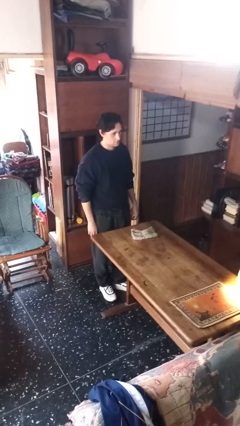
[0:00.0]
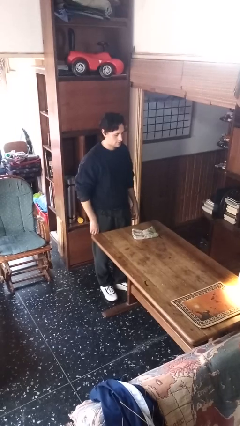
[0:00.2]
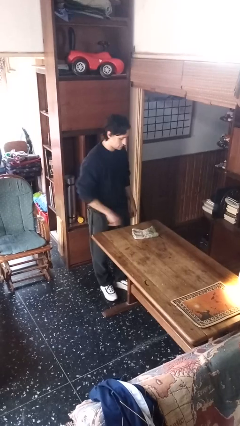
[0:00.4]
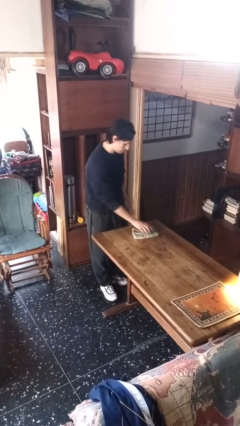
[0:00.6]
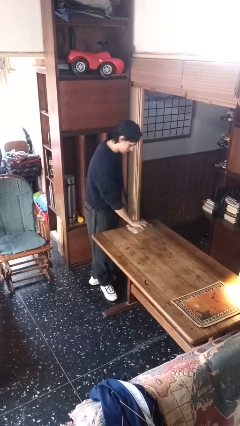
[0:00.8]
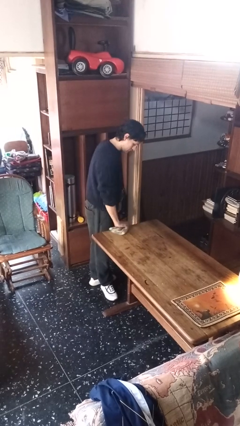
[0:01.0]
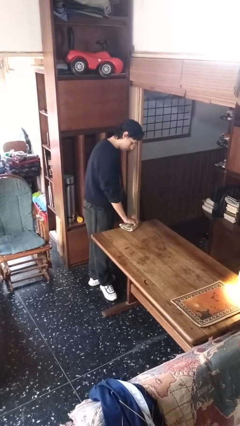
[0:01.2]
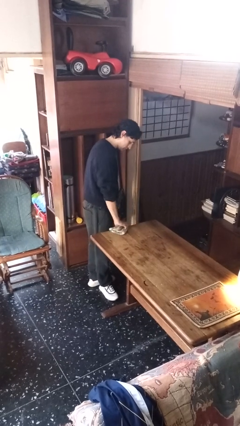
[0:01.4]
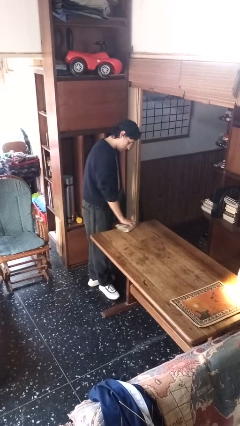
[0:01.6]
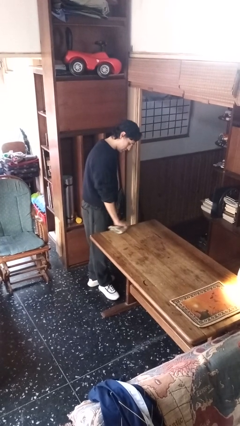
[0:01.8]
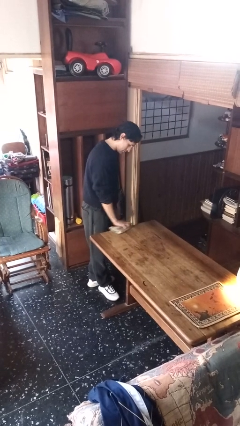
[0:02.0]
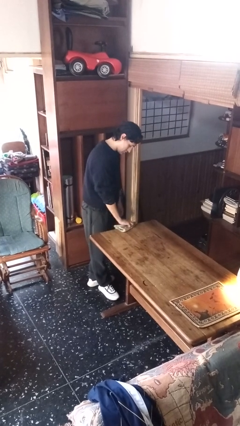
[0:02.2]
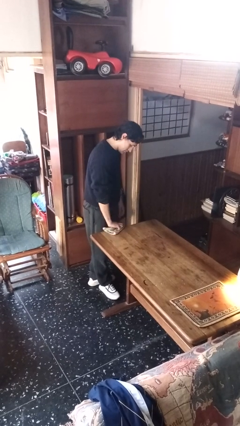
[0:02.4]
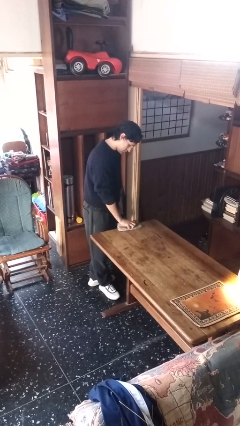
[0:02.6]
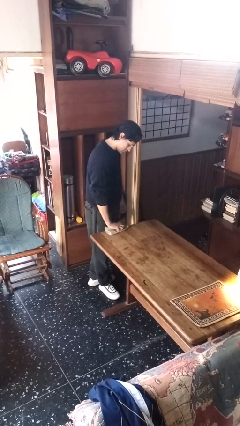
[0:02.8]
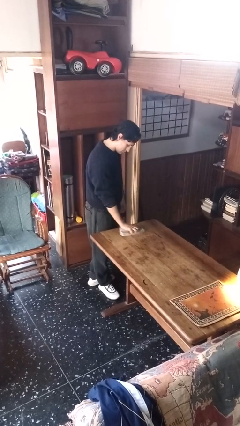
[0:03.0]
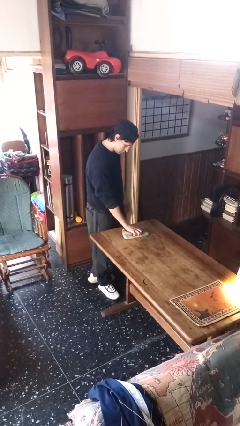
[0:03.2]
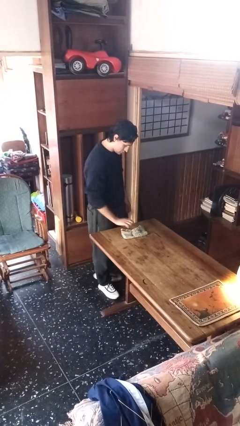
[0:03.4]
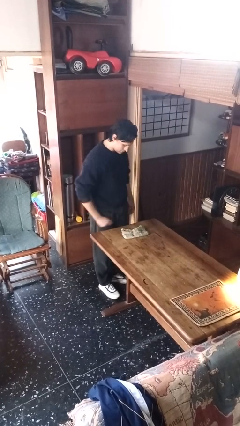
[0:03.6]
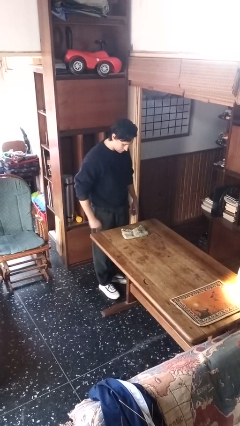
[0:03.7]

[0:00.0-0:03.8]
person cleans table with rag

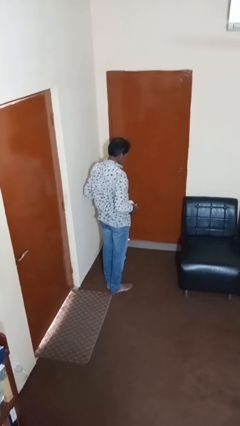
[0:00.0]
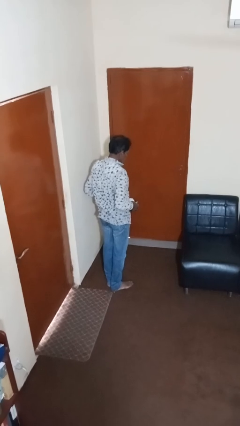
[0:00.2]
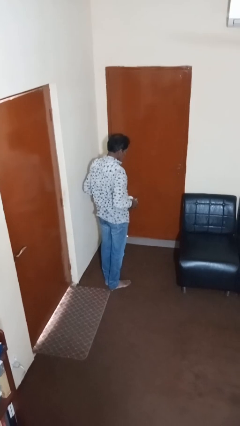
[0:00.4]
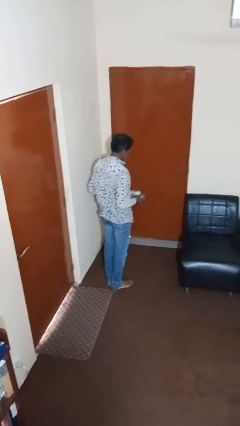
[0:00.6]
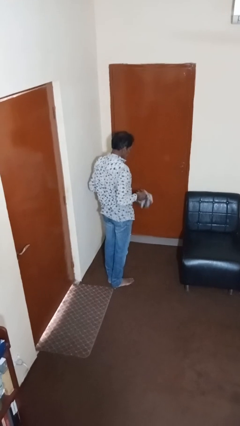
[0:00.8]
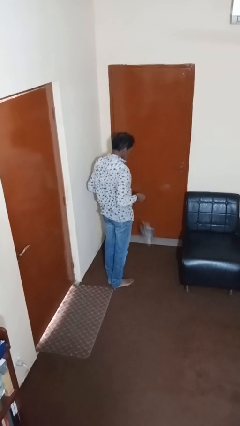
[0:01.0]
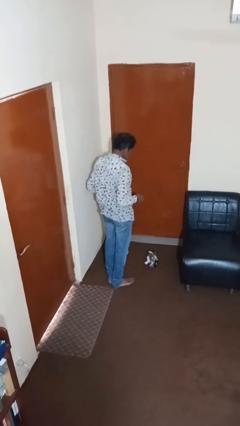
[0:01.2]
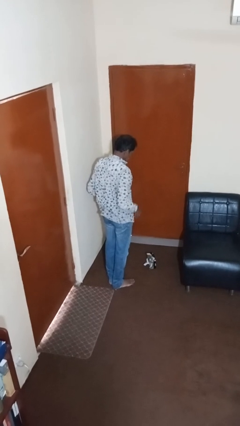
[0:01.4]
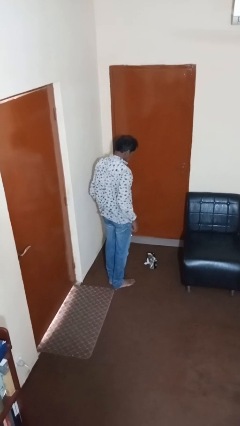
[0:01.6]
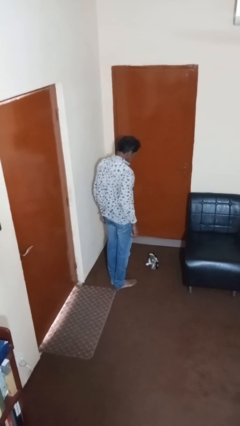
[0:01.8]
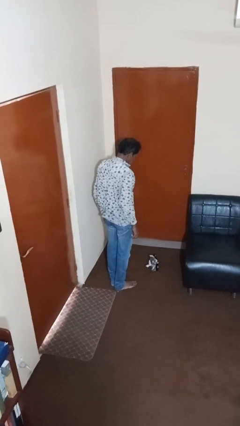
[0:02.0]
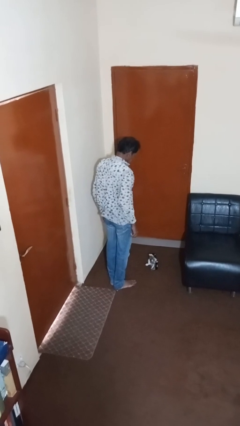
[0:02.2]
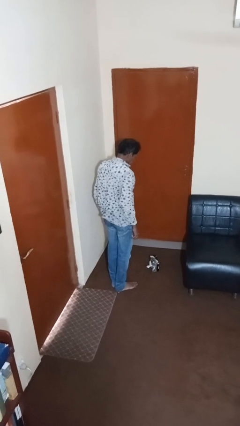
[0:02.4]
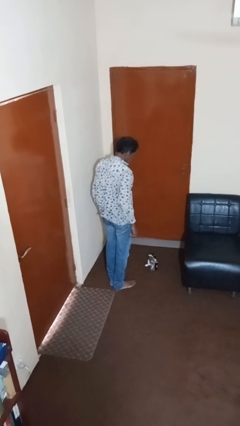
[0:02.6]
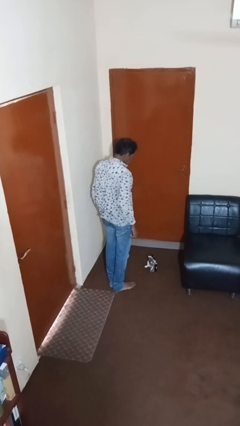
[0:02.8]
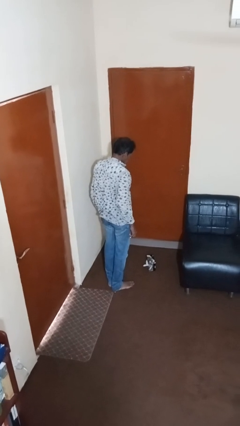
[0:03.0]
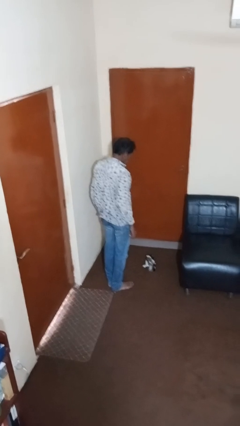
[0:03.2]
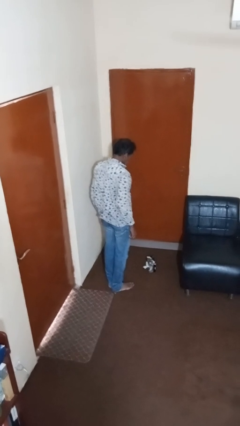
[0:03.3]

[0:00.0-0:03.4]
person drops object

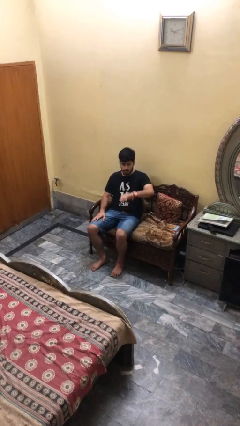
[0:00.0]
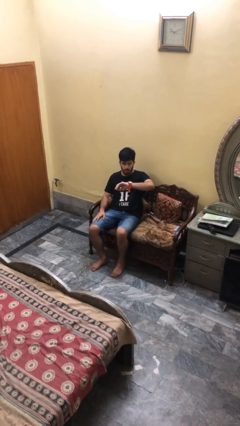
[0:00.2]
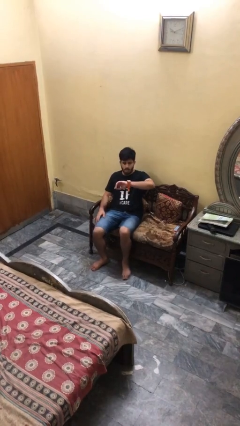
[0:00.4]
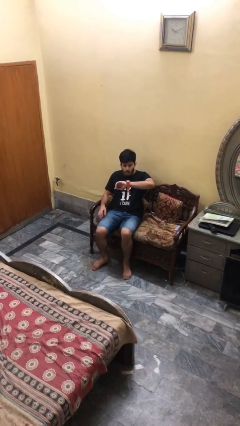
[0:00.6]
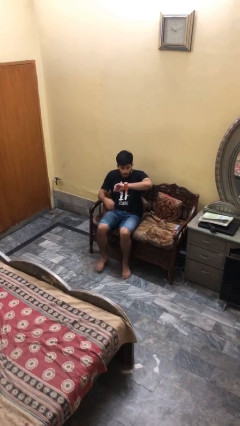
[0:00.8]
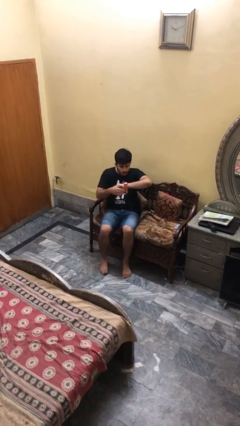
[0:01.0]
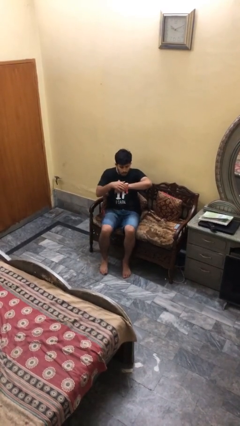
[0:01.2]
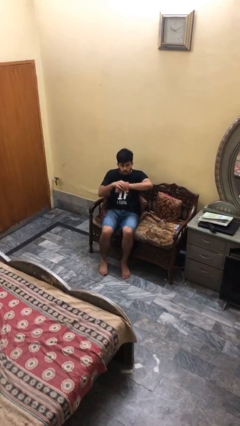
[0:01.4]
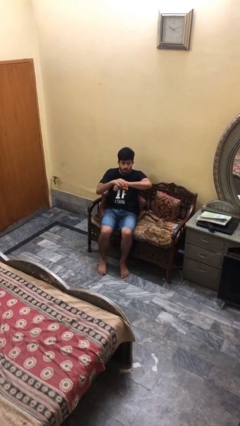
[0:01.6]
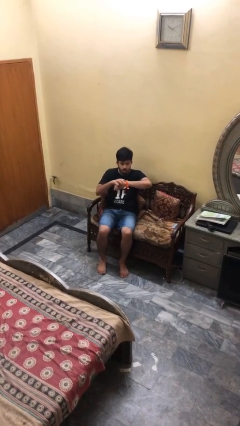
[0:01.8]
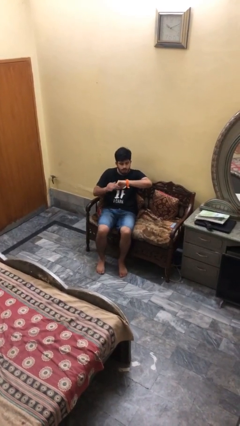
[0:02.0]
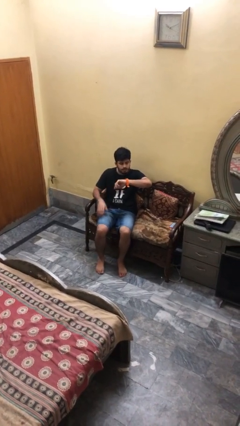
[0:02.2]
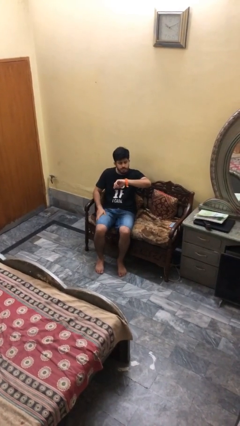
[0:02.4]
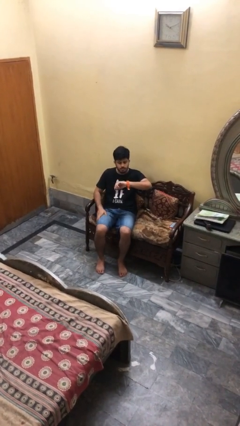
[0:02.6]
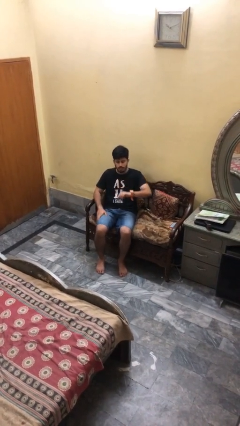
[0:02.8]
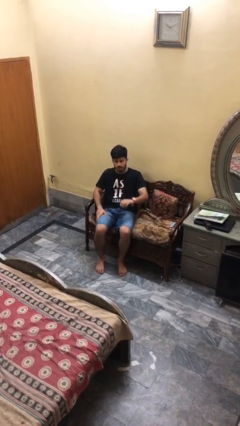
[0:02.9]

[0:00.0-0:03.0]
person looks at wristwatch

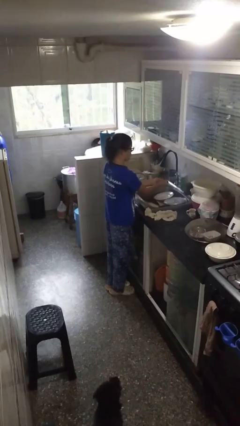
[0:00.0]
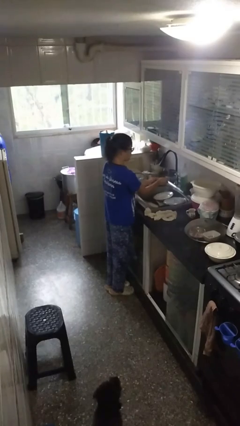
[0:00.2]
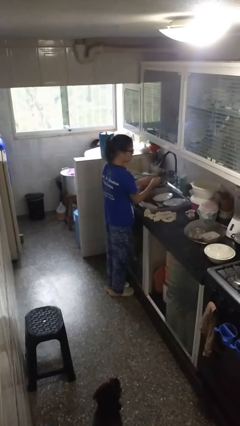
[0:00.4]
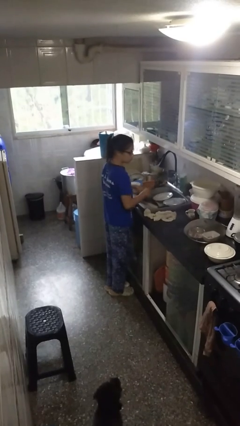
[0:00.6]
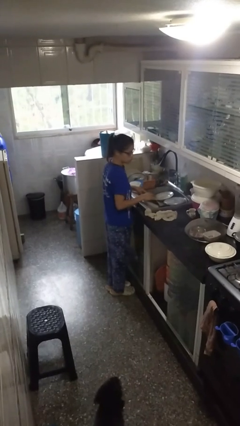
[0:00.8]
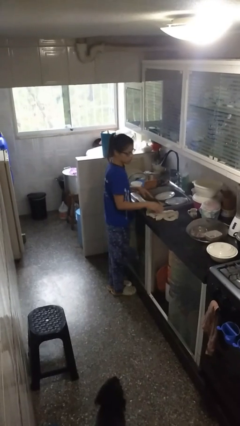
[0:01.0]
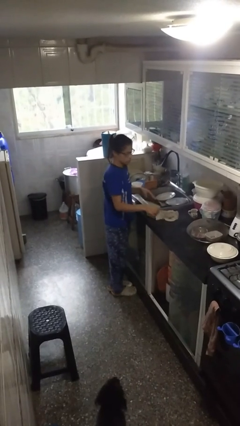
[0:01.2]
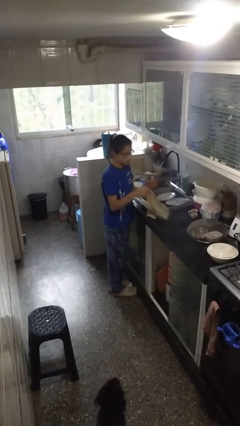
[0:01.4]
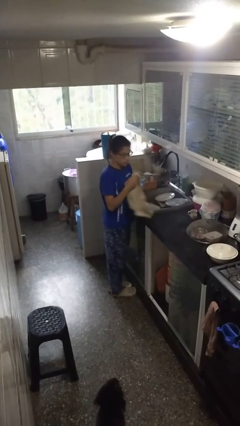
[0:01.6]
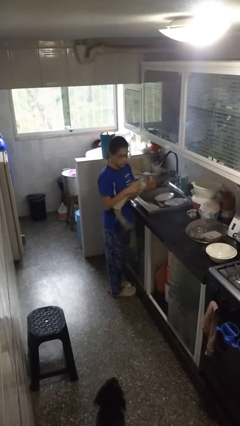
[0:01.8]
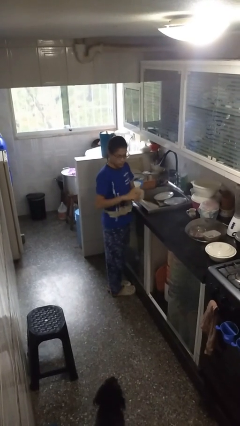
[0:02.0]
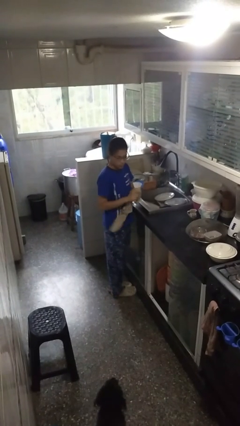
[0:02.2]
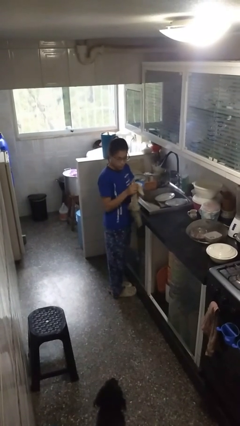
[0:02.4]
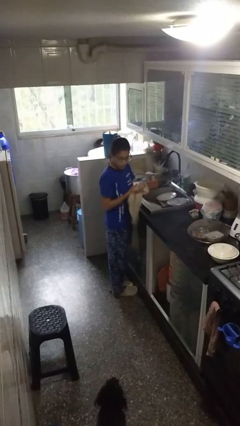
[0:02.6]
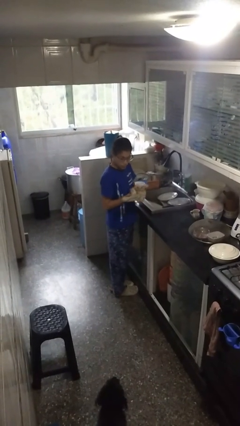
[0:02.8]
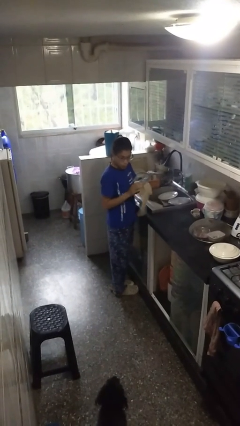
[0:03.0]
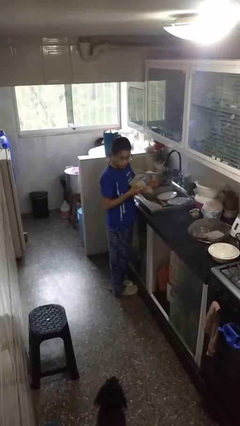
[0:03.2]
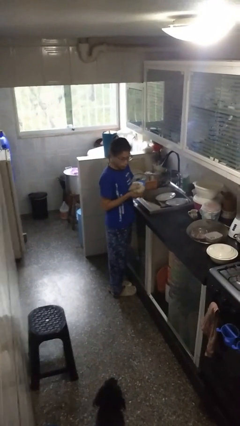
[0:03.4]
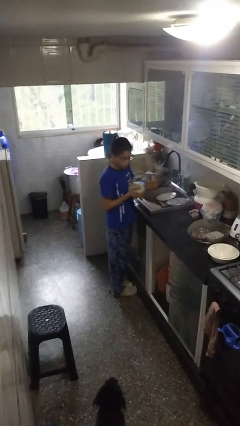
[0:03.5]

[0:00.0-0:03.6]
person dries hands with towel

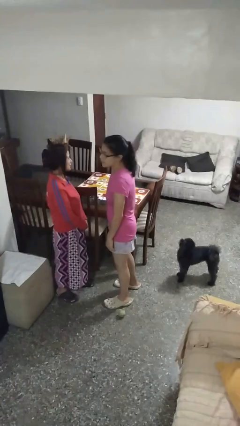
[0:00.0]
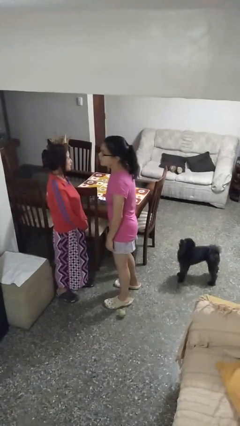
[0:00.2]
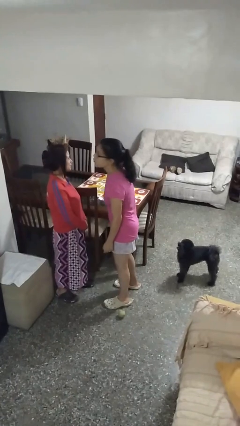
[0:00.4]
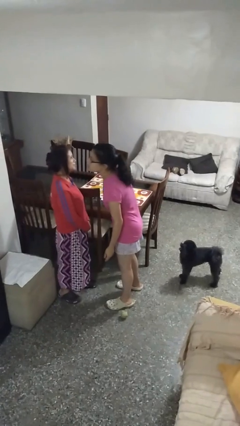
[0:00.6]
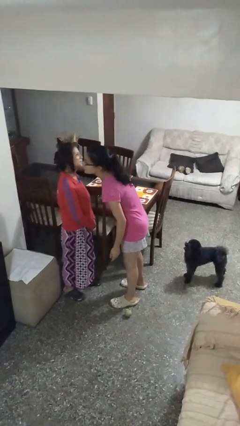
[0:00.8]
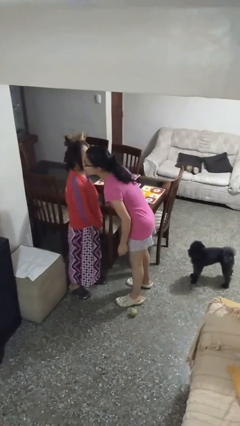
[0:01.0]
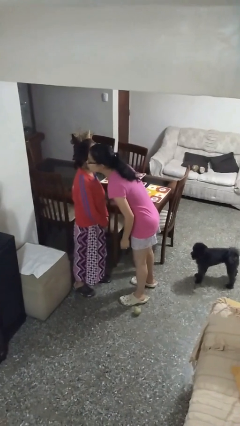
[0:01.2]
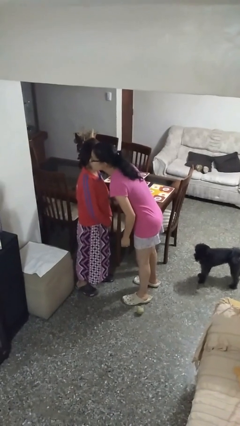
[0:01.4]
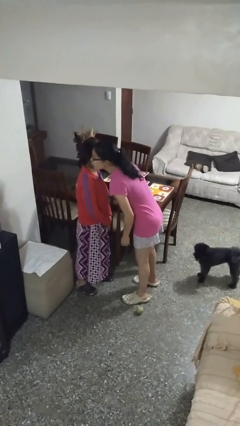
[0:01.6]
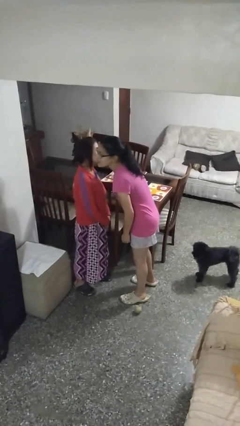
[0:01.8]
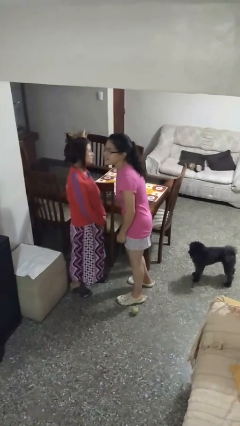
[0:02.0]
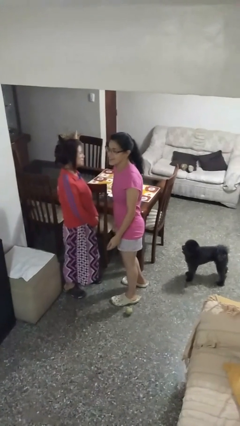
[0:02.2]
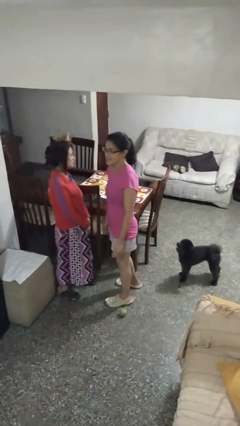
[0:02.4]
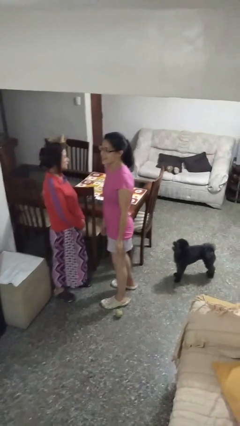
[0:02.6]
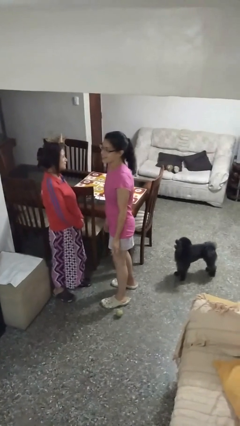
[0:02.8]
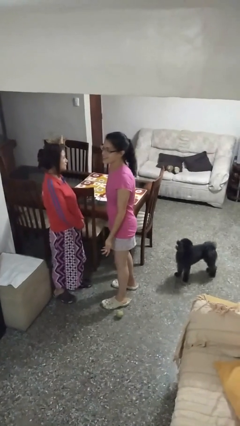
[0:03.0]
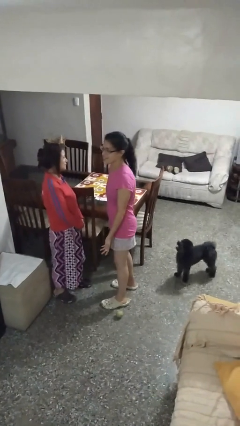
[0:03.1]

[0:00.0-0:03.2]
person kisses cheek of person

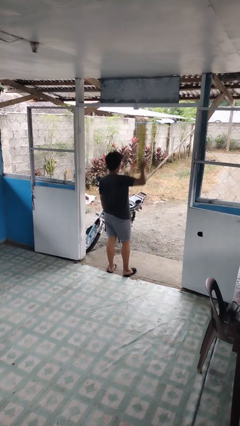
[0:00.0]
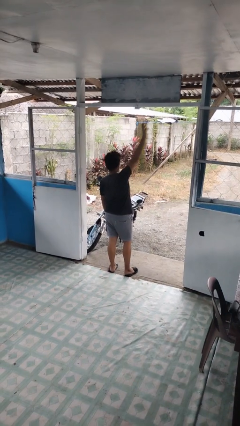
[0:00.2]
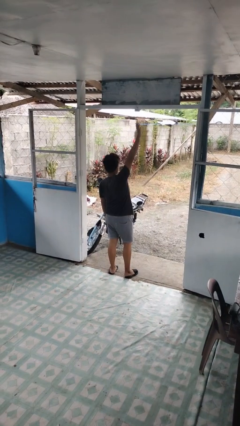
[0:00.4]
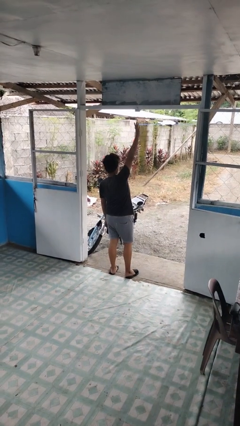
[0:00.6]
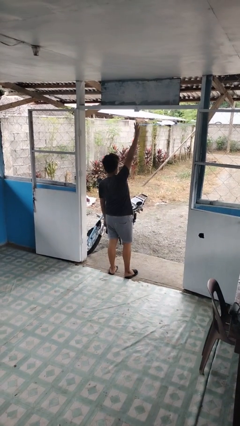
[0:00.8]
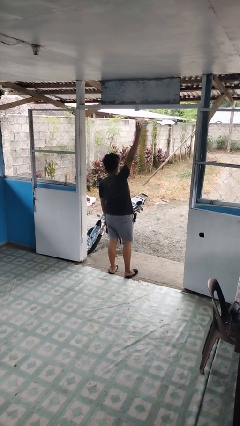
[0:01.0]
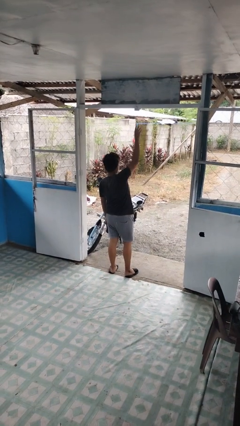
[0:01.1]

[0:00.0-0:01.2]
person gestures raise hand
